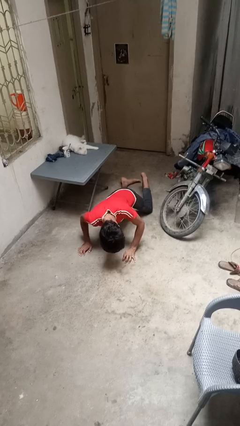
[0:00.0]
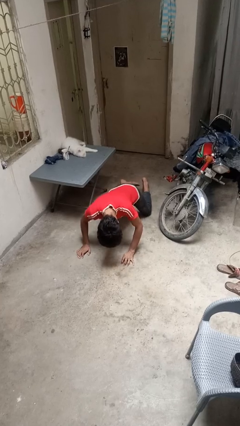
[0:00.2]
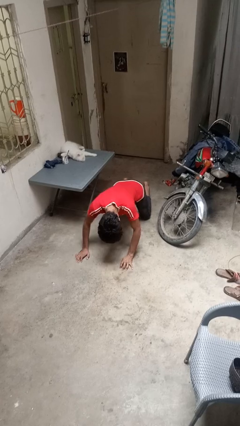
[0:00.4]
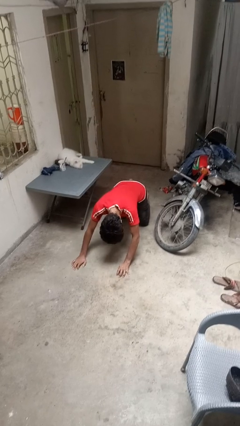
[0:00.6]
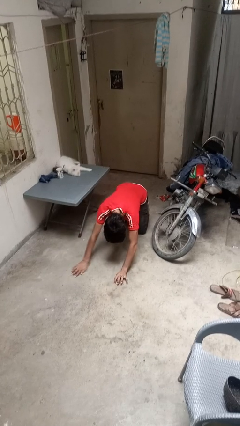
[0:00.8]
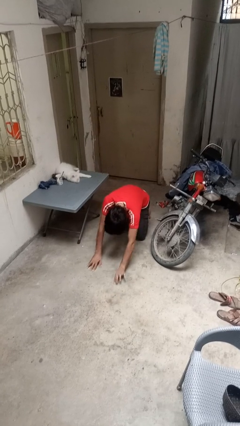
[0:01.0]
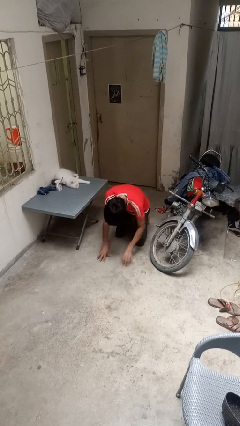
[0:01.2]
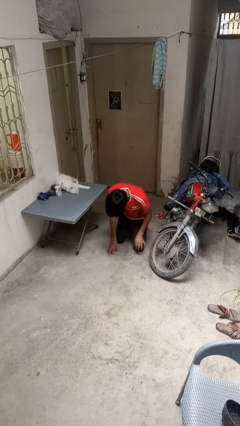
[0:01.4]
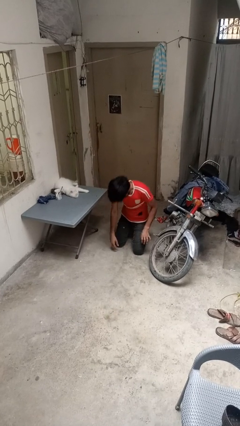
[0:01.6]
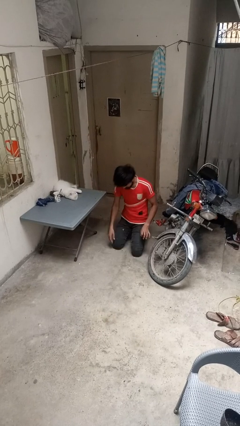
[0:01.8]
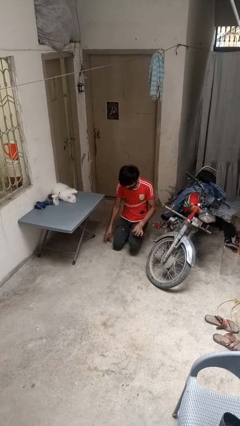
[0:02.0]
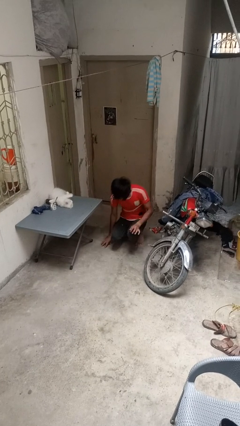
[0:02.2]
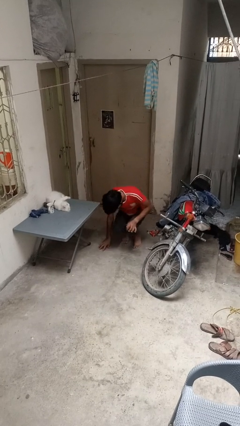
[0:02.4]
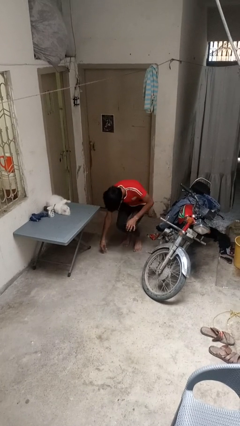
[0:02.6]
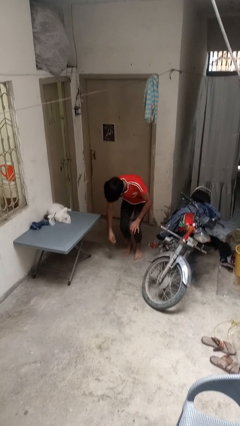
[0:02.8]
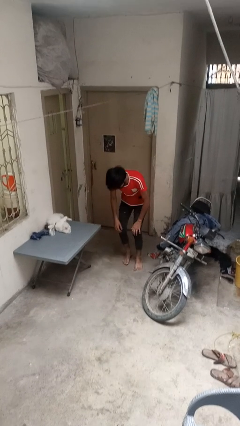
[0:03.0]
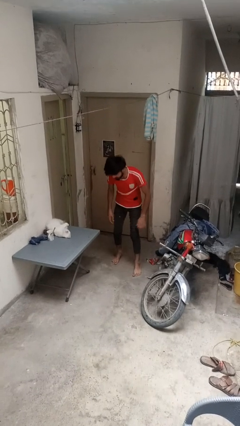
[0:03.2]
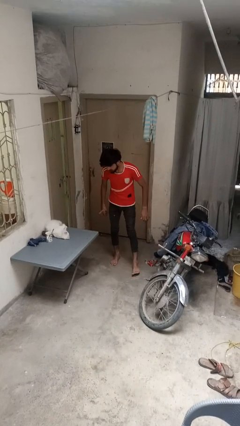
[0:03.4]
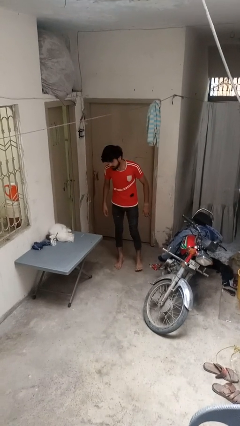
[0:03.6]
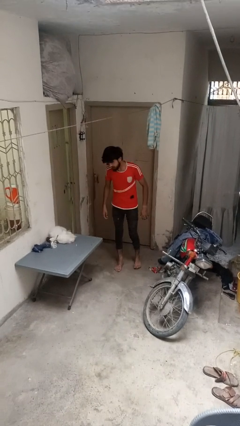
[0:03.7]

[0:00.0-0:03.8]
person stands up from floor

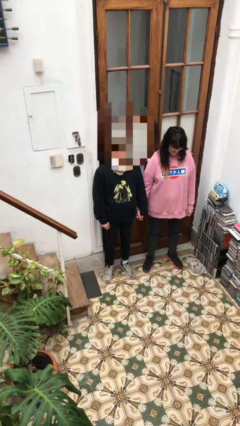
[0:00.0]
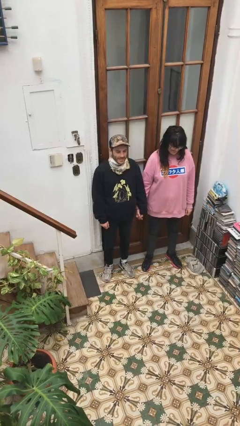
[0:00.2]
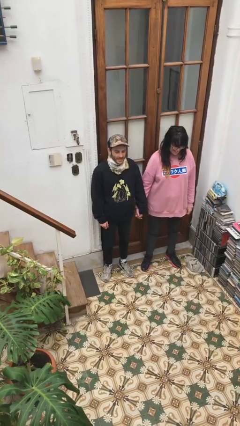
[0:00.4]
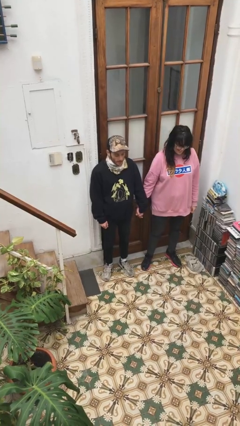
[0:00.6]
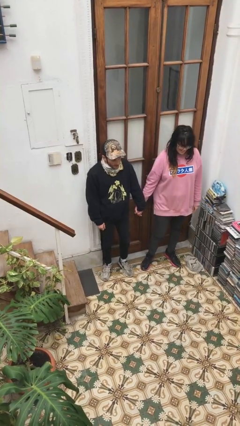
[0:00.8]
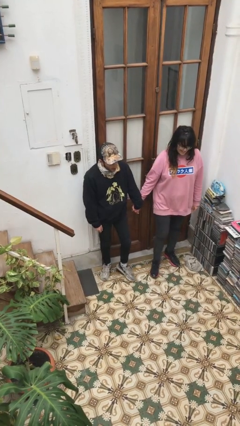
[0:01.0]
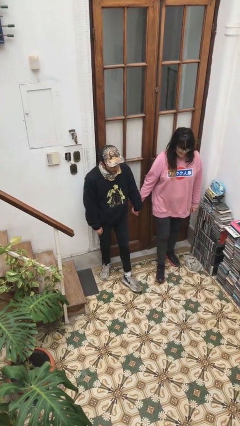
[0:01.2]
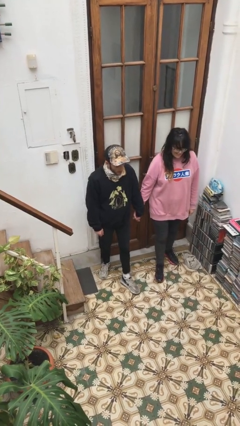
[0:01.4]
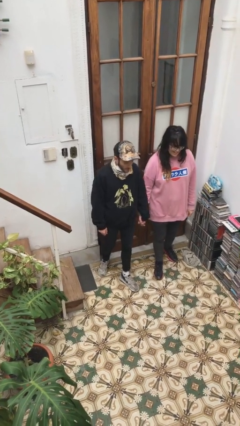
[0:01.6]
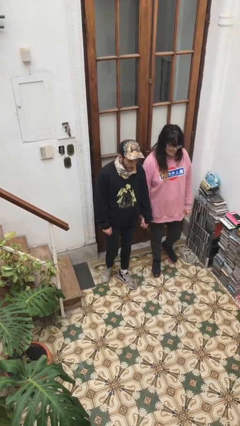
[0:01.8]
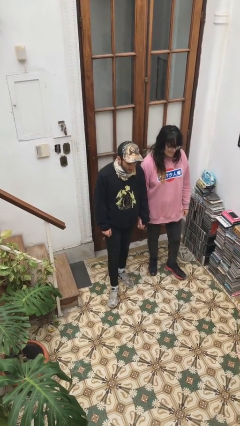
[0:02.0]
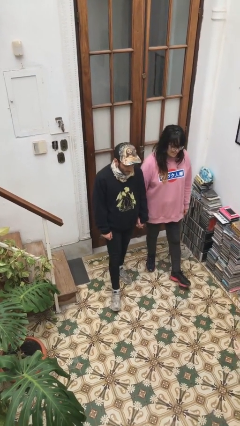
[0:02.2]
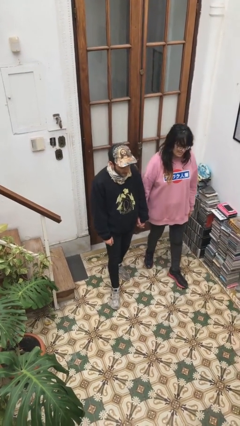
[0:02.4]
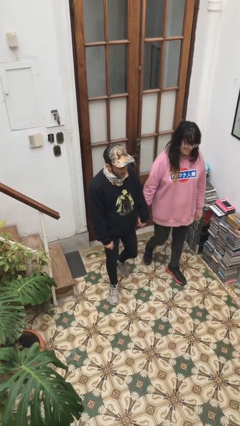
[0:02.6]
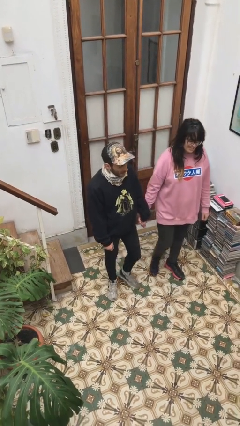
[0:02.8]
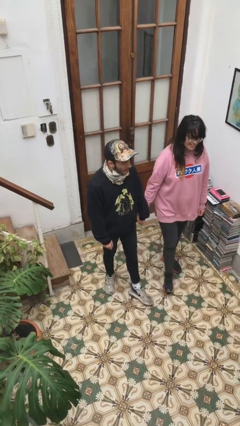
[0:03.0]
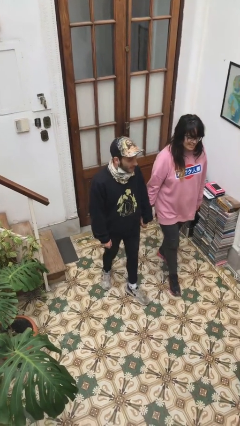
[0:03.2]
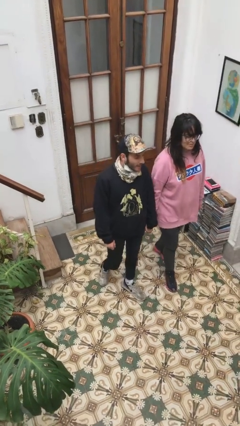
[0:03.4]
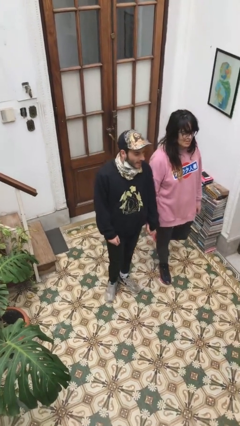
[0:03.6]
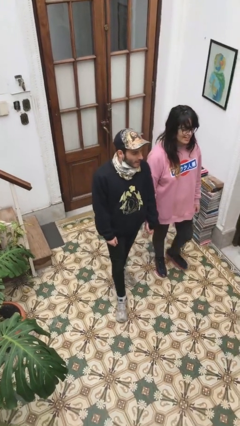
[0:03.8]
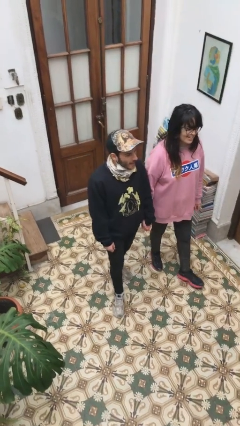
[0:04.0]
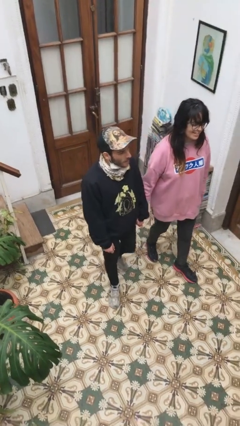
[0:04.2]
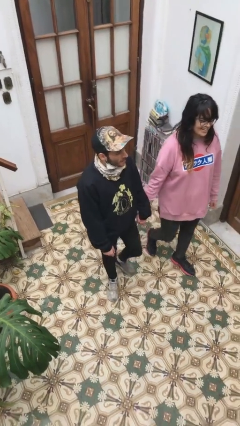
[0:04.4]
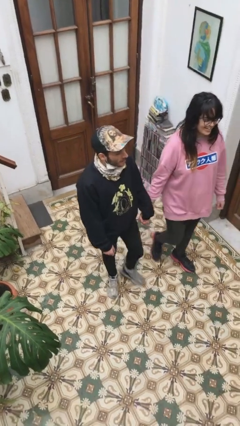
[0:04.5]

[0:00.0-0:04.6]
person holds hand

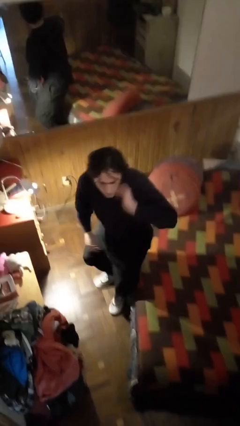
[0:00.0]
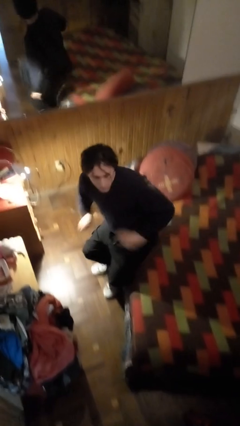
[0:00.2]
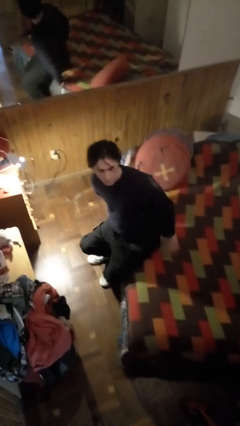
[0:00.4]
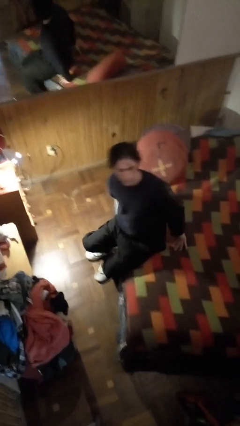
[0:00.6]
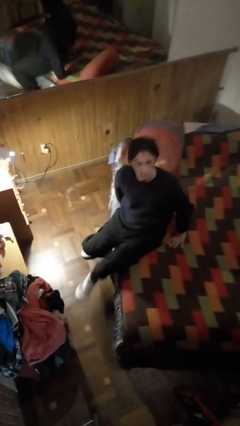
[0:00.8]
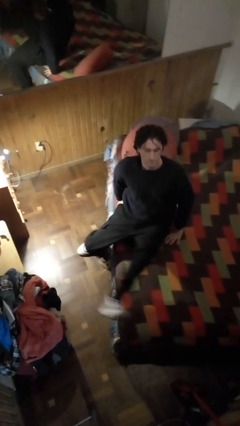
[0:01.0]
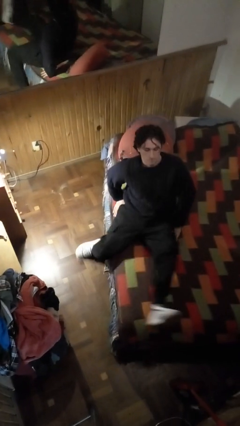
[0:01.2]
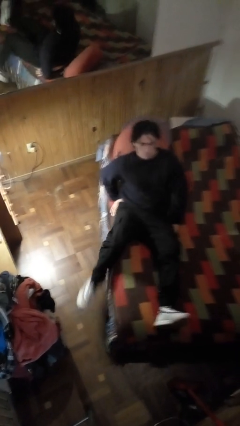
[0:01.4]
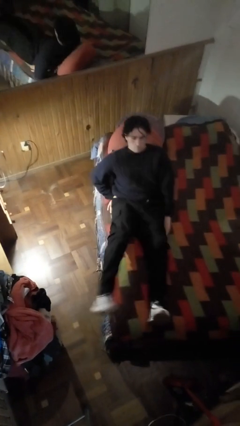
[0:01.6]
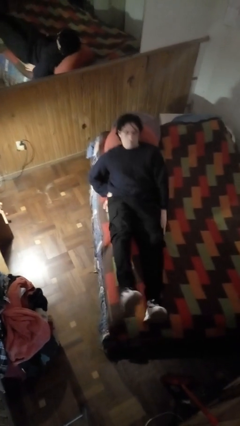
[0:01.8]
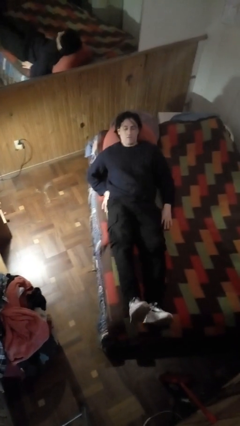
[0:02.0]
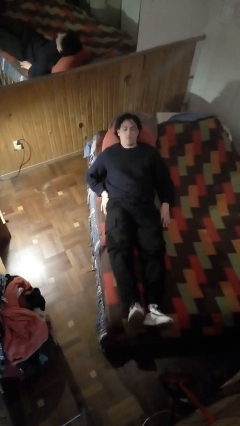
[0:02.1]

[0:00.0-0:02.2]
person lies down on bed

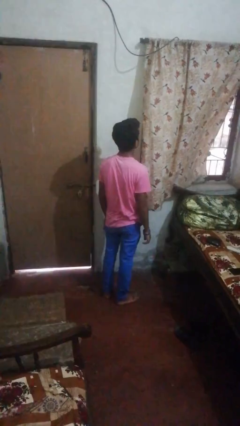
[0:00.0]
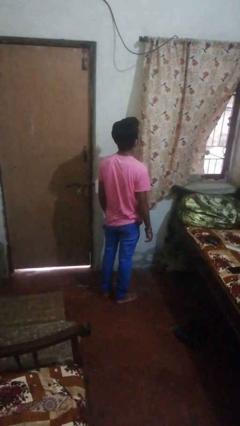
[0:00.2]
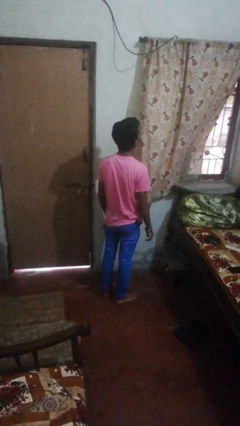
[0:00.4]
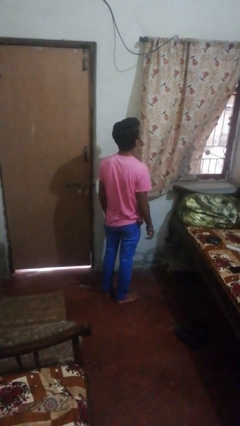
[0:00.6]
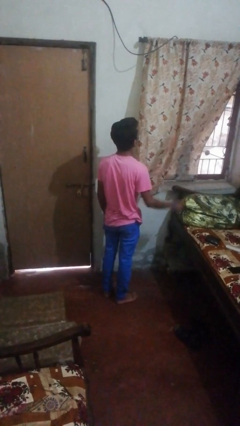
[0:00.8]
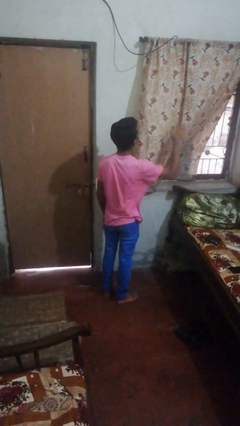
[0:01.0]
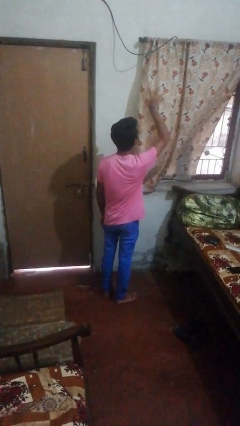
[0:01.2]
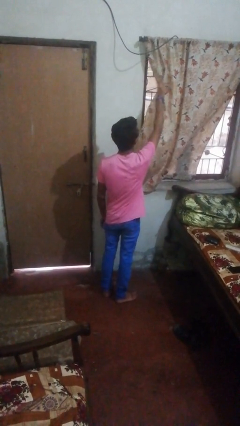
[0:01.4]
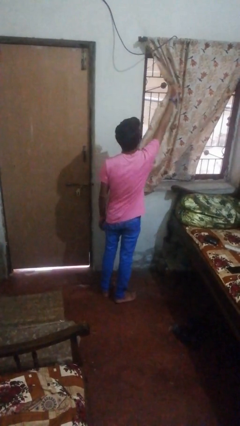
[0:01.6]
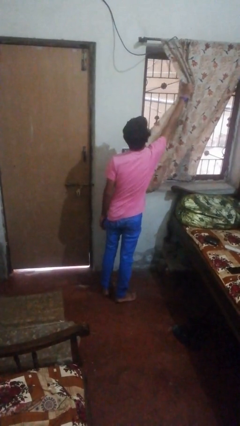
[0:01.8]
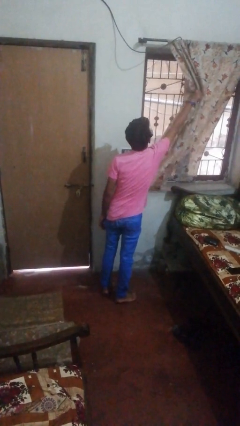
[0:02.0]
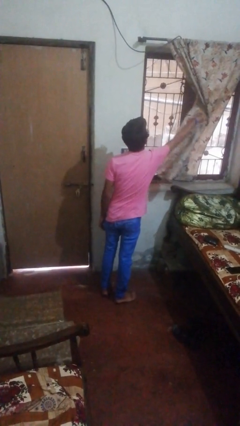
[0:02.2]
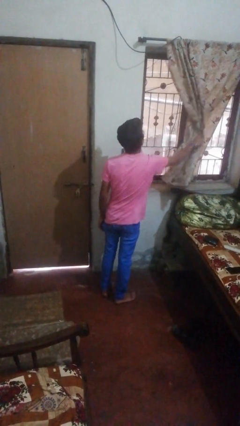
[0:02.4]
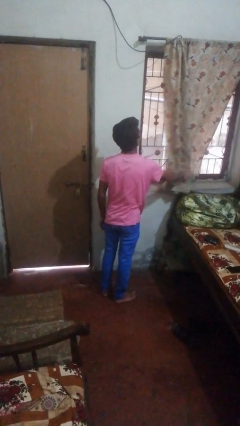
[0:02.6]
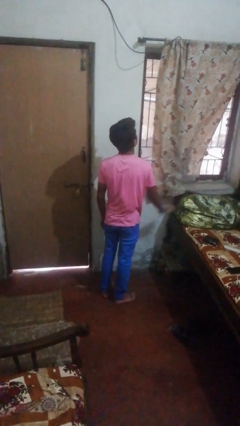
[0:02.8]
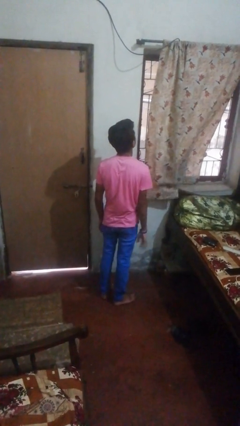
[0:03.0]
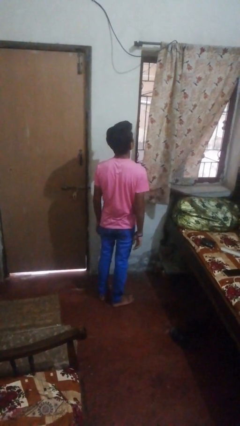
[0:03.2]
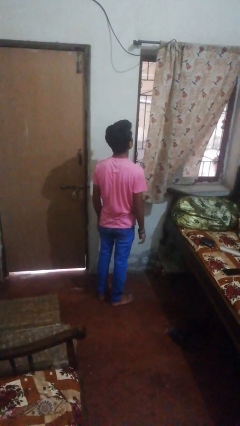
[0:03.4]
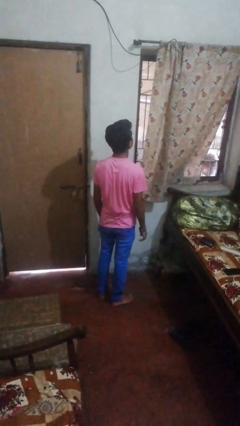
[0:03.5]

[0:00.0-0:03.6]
person opens curtains

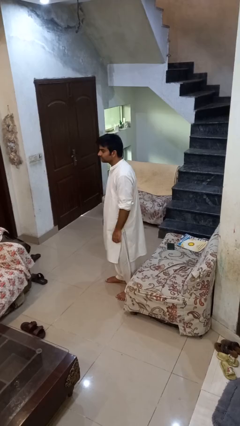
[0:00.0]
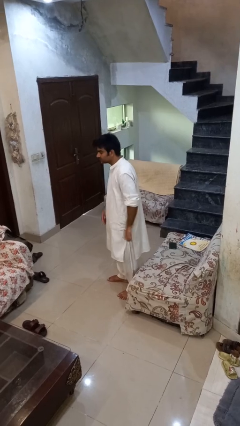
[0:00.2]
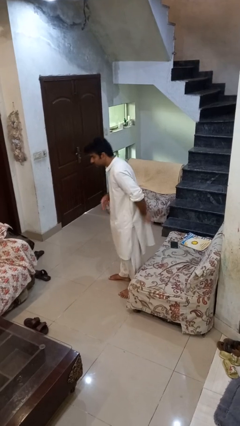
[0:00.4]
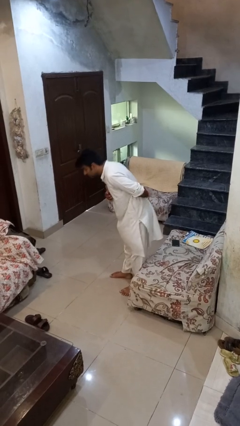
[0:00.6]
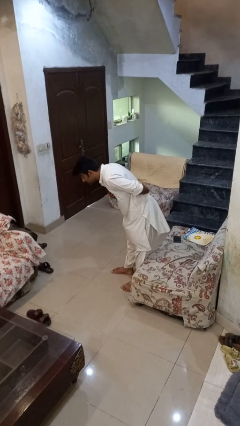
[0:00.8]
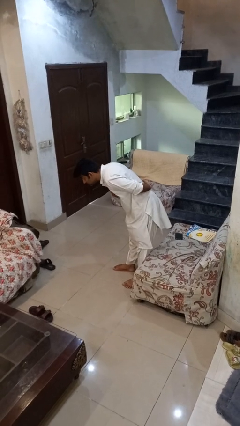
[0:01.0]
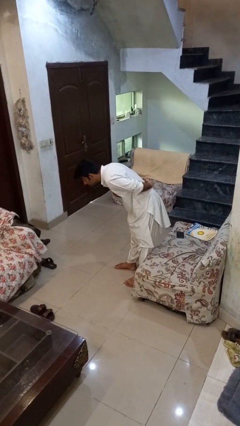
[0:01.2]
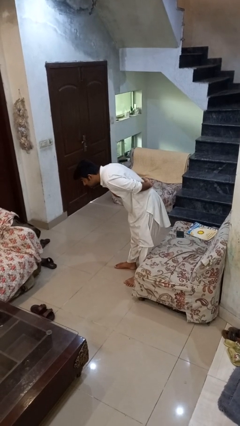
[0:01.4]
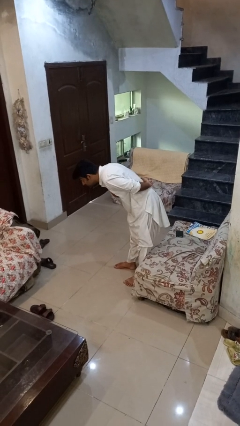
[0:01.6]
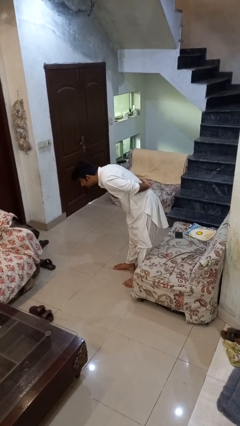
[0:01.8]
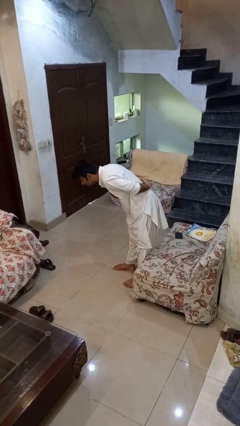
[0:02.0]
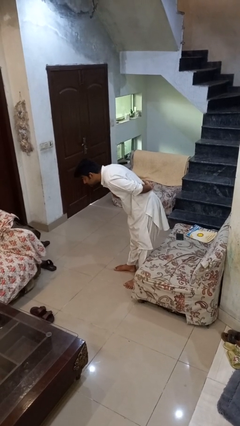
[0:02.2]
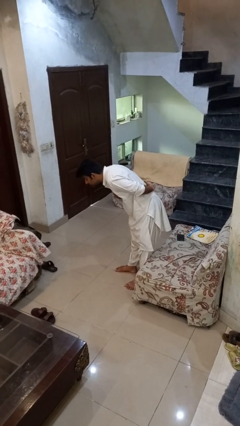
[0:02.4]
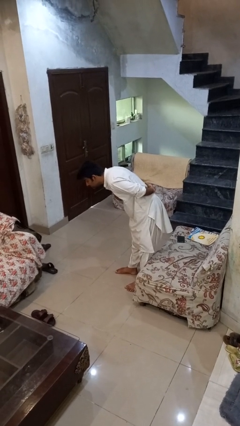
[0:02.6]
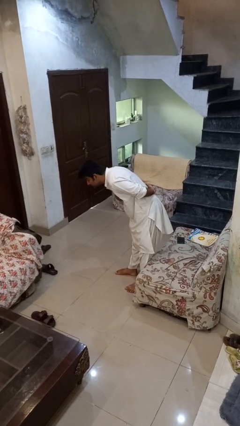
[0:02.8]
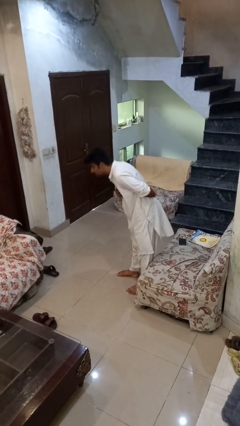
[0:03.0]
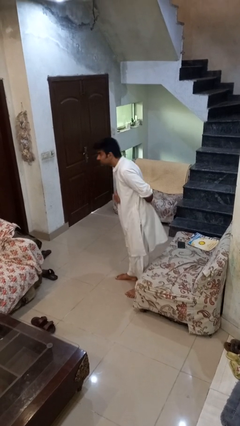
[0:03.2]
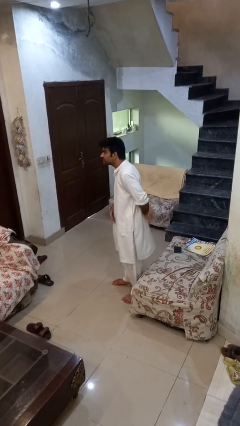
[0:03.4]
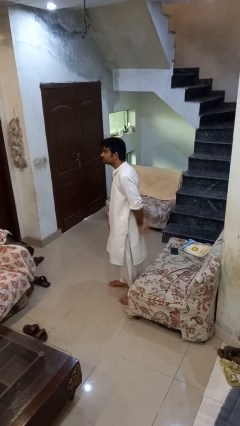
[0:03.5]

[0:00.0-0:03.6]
person bows
